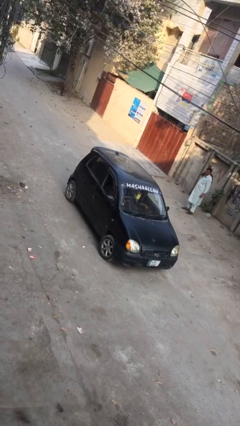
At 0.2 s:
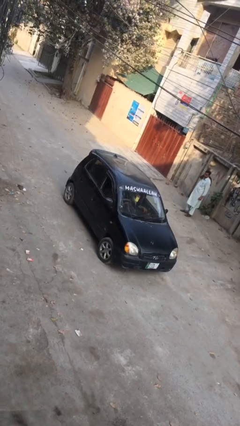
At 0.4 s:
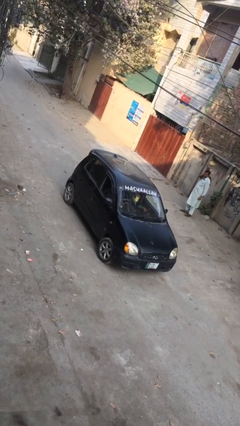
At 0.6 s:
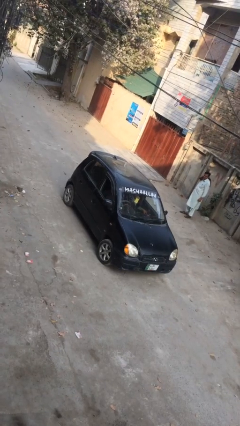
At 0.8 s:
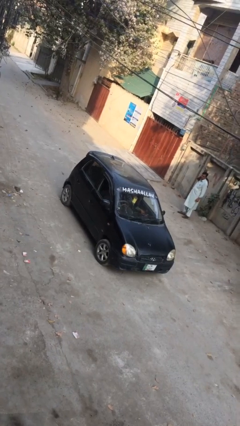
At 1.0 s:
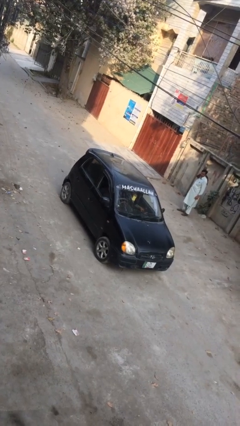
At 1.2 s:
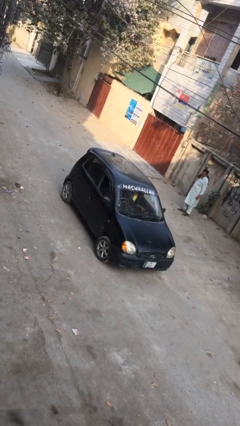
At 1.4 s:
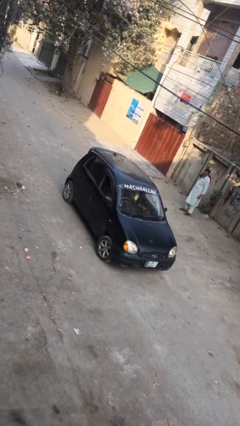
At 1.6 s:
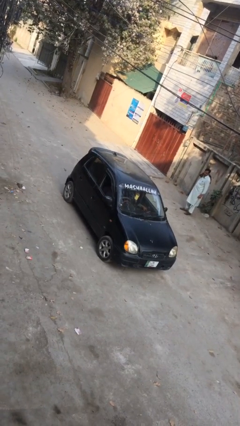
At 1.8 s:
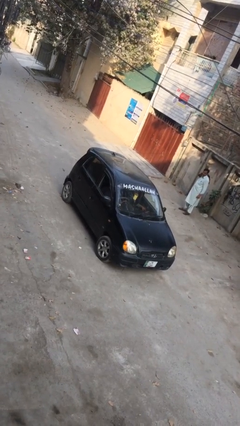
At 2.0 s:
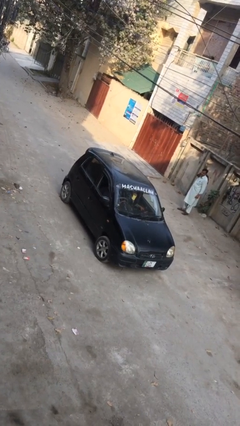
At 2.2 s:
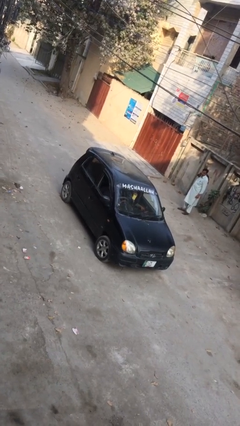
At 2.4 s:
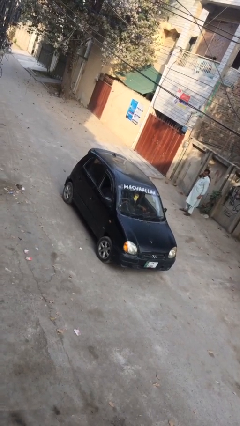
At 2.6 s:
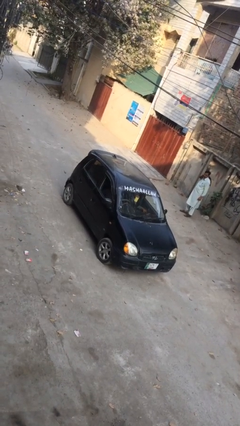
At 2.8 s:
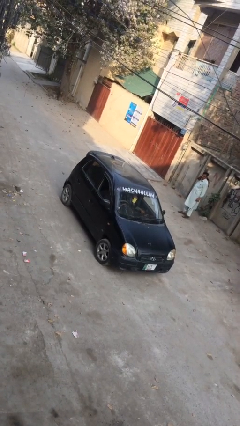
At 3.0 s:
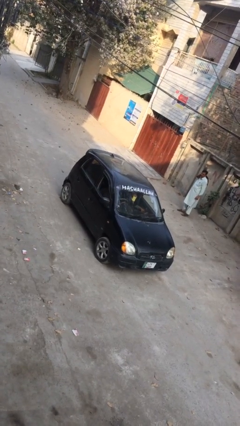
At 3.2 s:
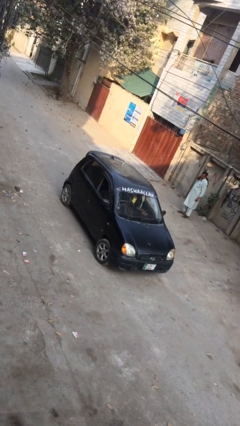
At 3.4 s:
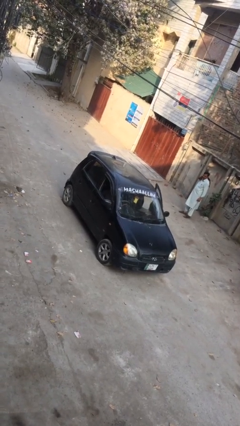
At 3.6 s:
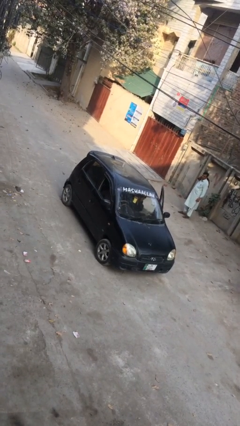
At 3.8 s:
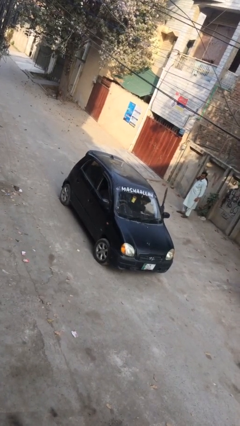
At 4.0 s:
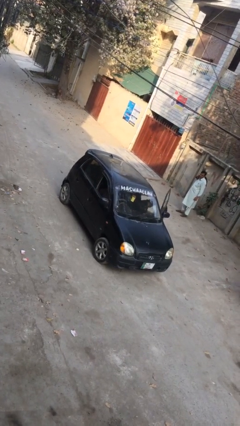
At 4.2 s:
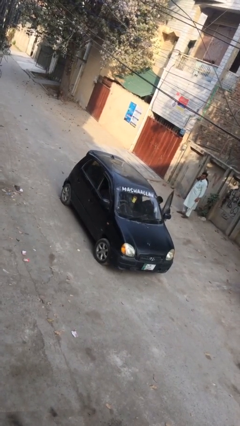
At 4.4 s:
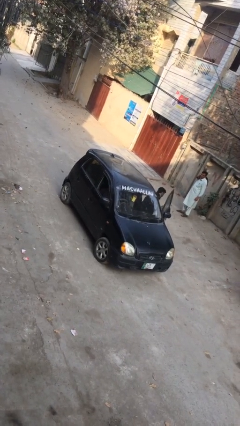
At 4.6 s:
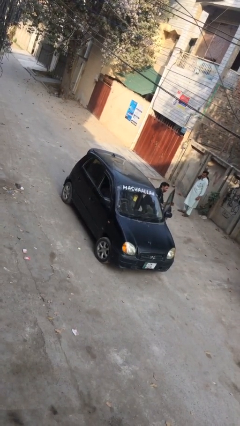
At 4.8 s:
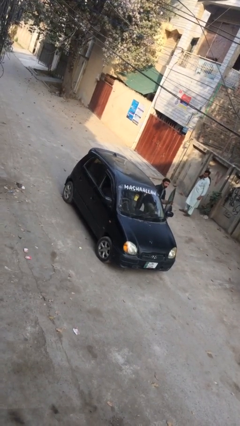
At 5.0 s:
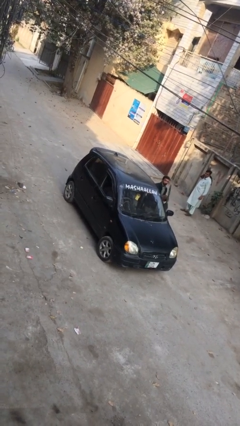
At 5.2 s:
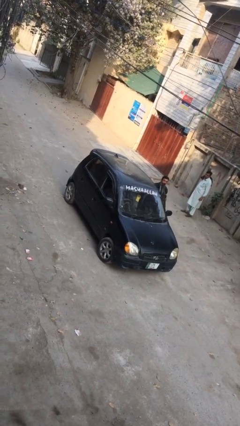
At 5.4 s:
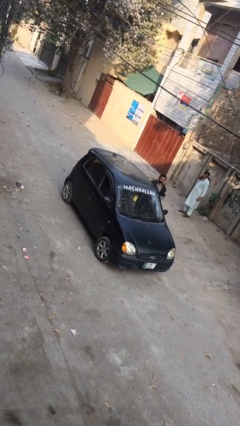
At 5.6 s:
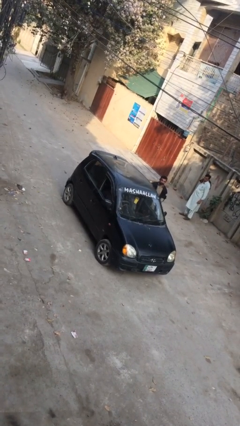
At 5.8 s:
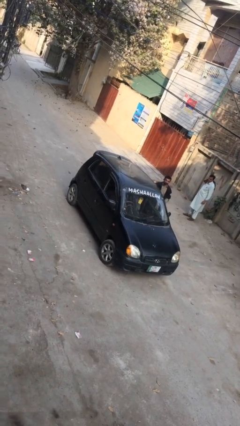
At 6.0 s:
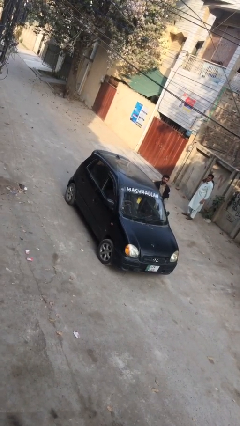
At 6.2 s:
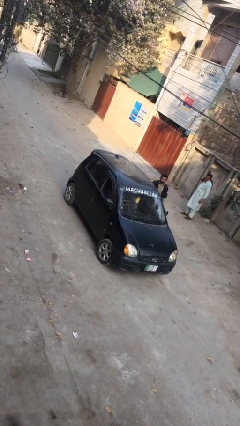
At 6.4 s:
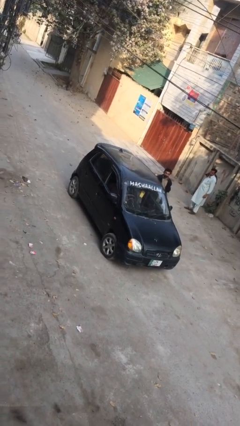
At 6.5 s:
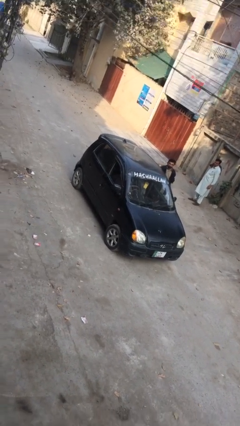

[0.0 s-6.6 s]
car drops off person

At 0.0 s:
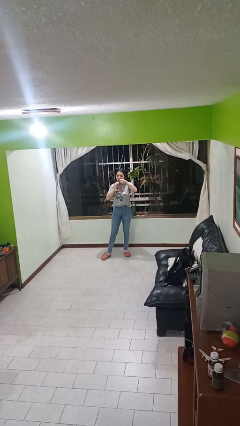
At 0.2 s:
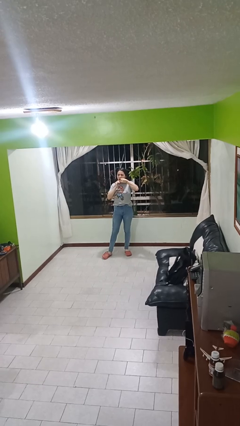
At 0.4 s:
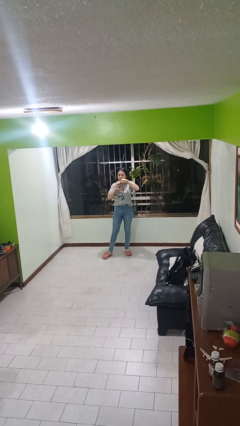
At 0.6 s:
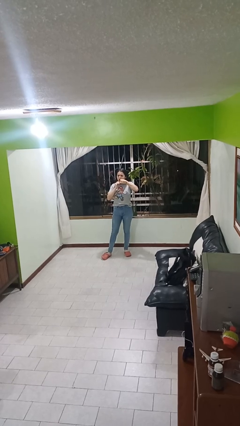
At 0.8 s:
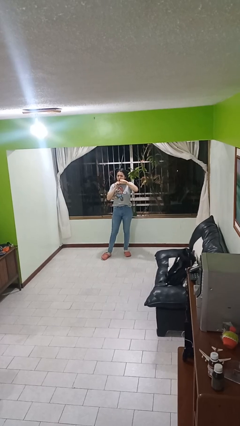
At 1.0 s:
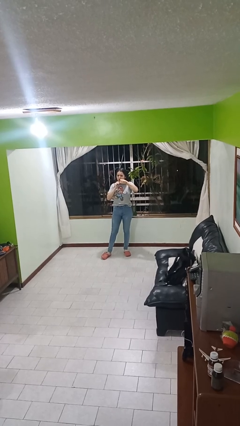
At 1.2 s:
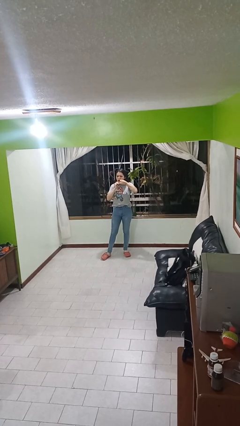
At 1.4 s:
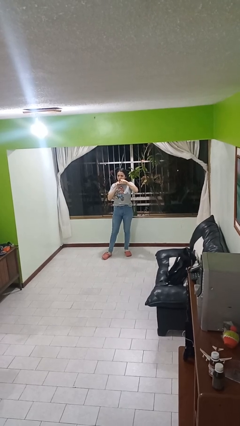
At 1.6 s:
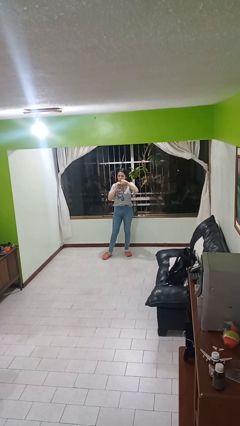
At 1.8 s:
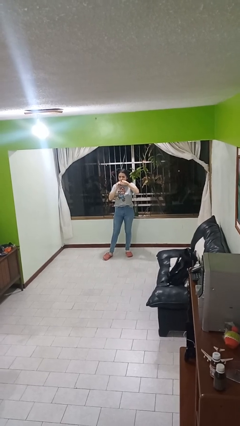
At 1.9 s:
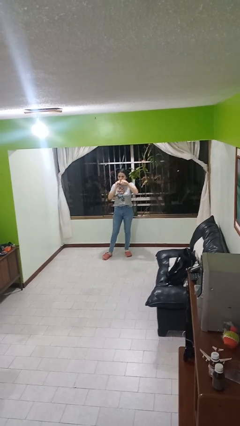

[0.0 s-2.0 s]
person flosses

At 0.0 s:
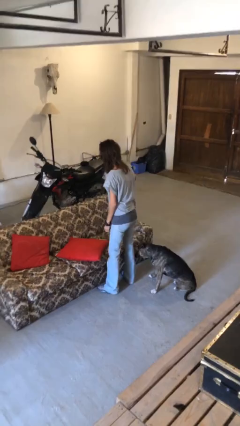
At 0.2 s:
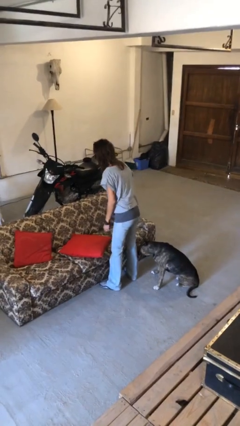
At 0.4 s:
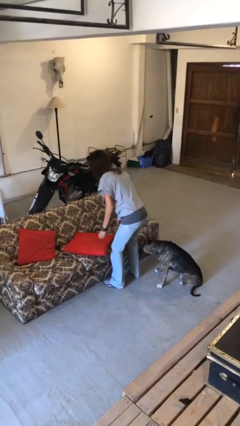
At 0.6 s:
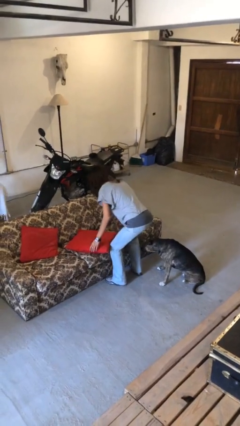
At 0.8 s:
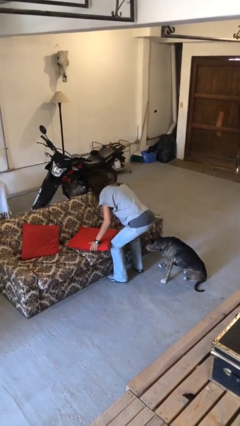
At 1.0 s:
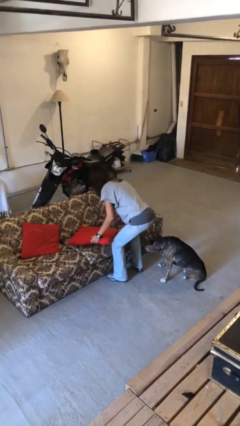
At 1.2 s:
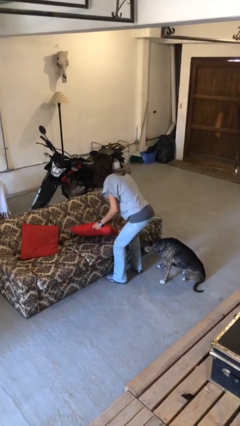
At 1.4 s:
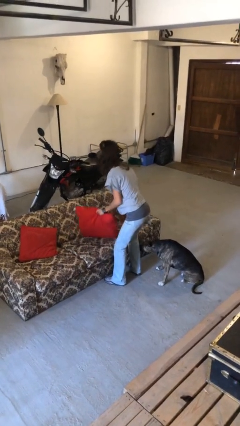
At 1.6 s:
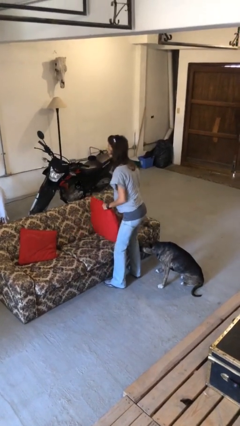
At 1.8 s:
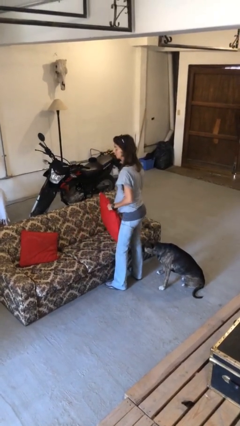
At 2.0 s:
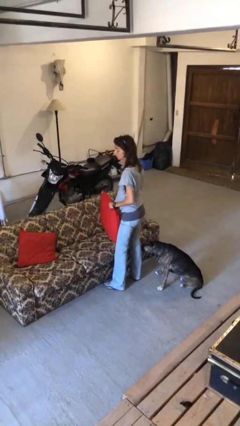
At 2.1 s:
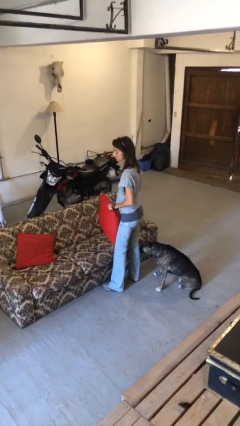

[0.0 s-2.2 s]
person picks up object from couch

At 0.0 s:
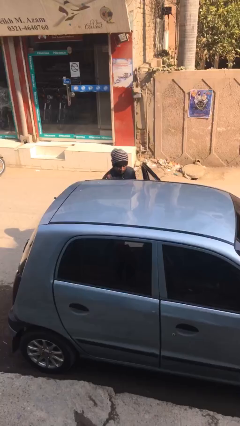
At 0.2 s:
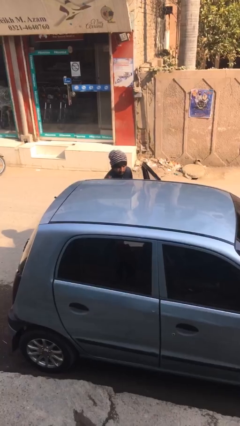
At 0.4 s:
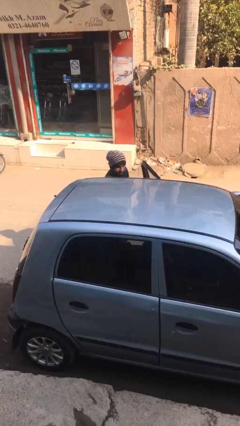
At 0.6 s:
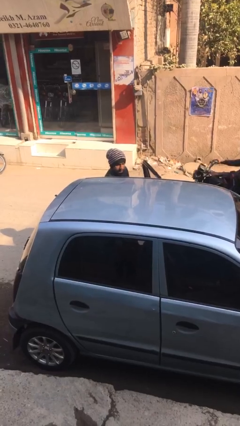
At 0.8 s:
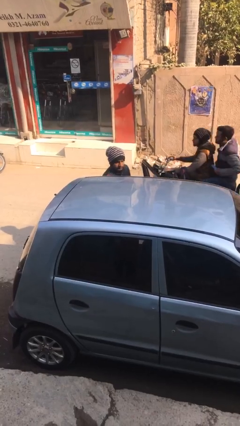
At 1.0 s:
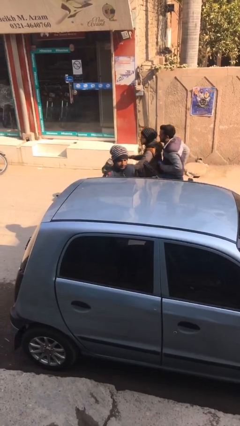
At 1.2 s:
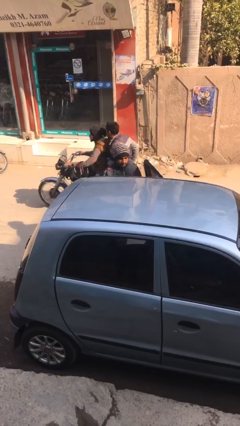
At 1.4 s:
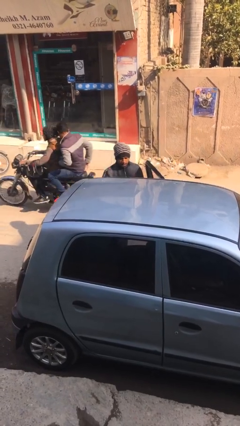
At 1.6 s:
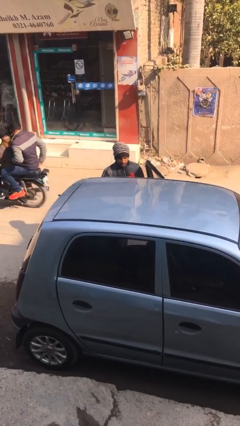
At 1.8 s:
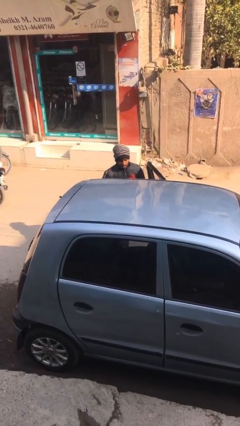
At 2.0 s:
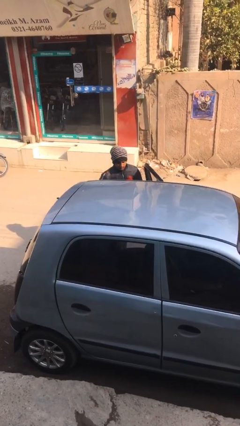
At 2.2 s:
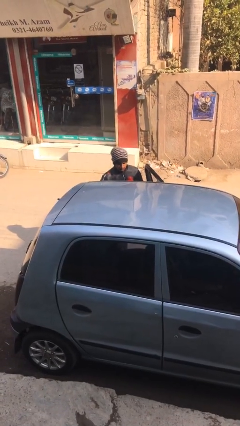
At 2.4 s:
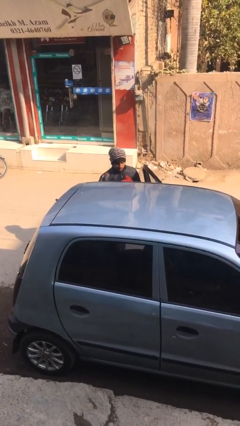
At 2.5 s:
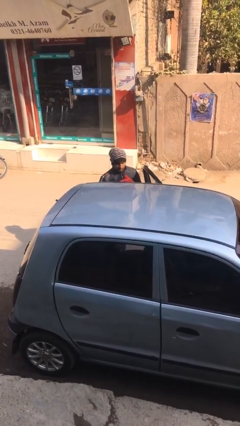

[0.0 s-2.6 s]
person unloads car

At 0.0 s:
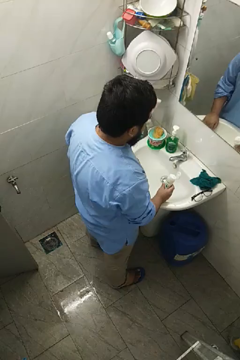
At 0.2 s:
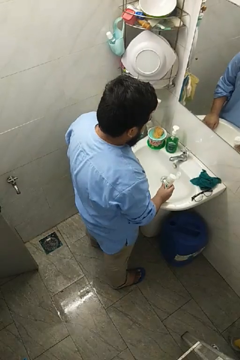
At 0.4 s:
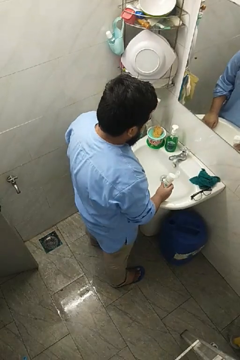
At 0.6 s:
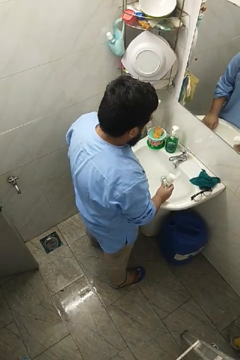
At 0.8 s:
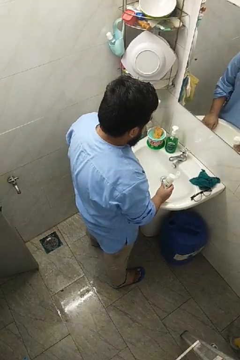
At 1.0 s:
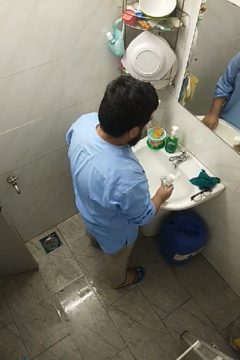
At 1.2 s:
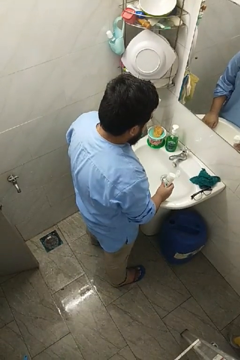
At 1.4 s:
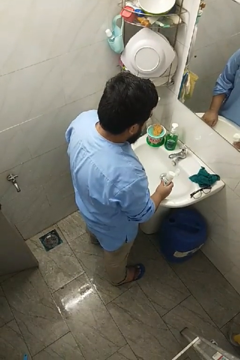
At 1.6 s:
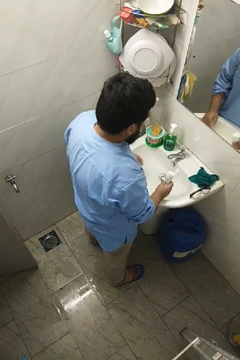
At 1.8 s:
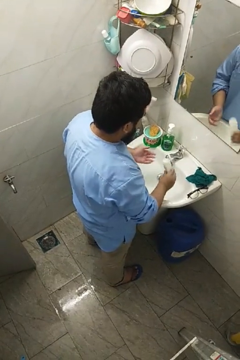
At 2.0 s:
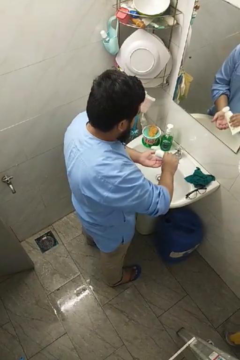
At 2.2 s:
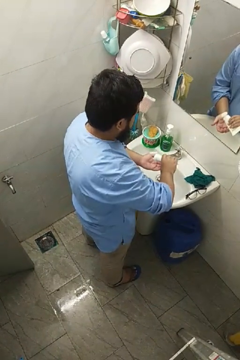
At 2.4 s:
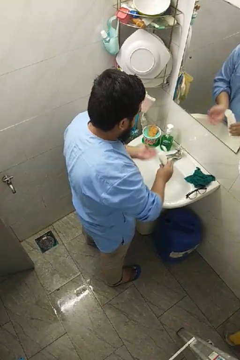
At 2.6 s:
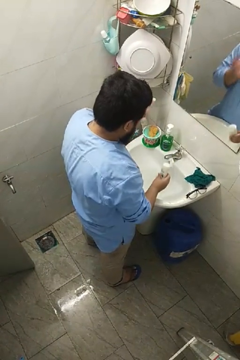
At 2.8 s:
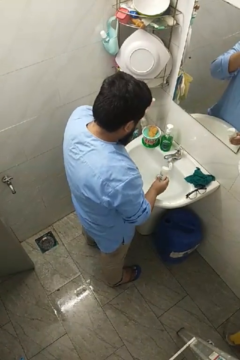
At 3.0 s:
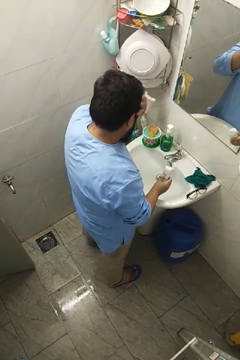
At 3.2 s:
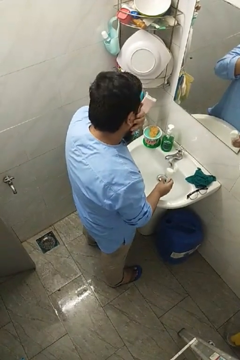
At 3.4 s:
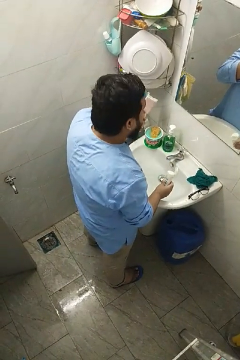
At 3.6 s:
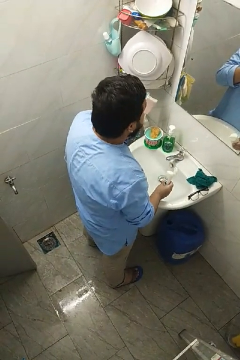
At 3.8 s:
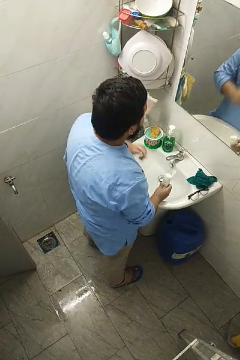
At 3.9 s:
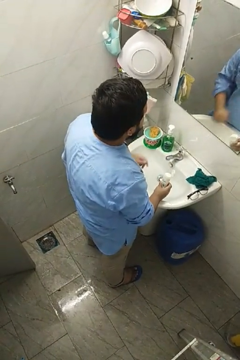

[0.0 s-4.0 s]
person applies facial moisturizer

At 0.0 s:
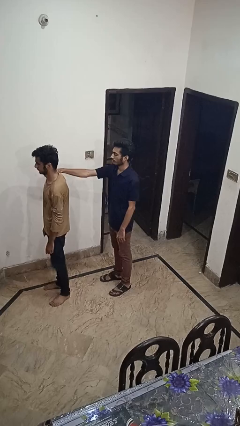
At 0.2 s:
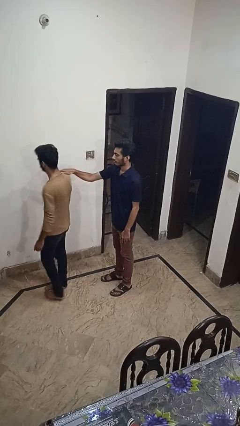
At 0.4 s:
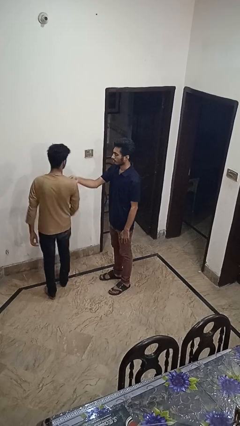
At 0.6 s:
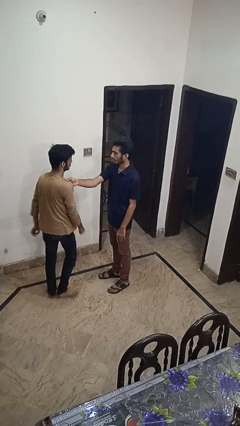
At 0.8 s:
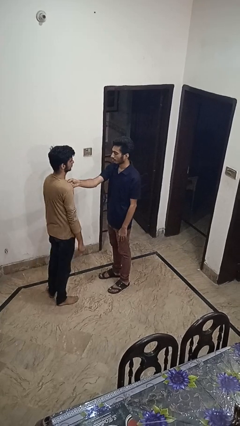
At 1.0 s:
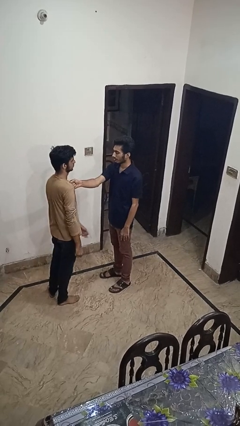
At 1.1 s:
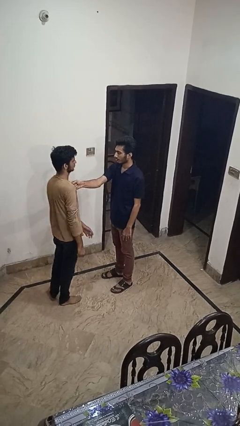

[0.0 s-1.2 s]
person spins person around
